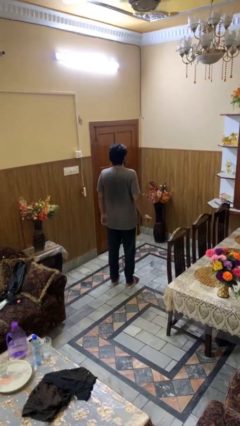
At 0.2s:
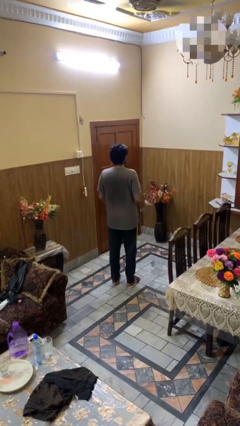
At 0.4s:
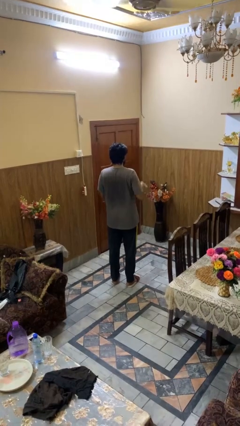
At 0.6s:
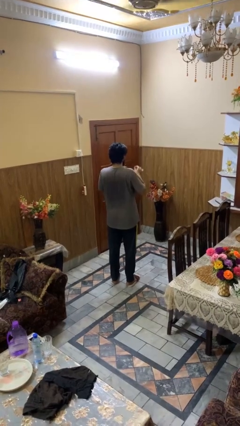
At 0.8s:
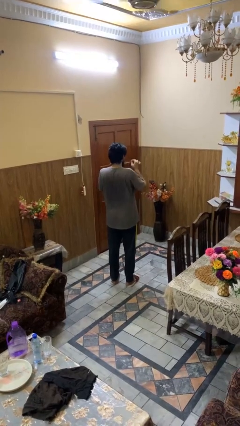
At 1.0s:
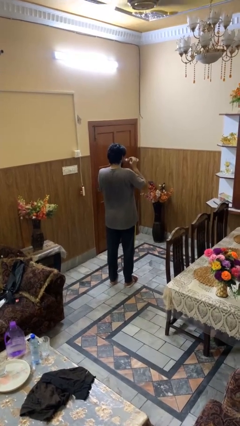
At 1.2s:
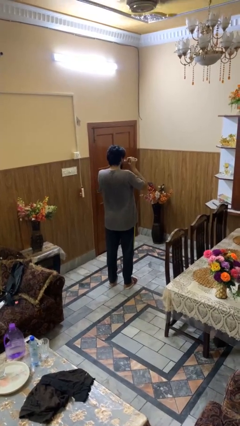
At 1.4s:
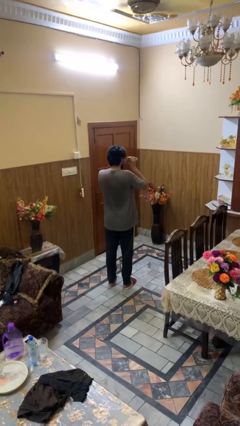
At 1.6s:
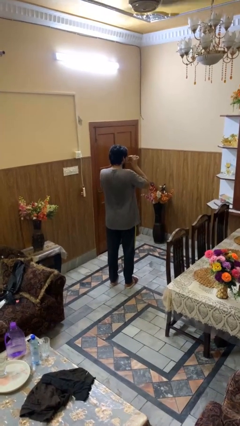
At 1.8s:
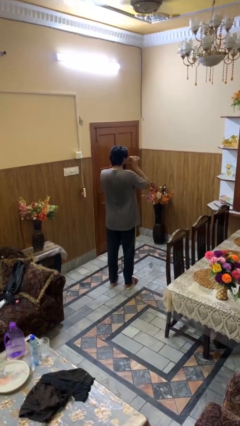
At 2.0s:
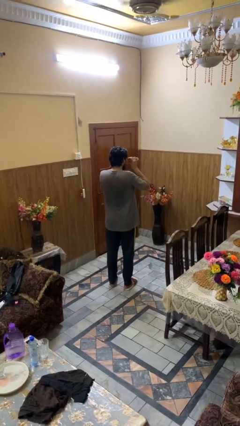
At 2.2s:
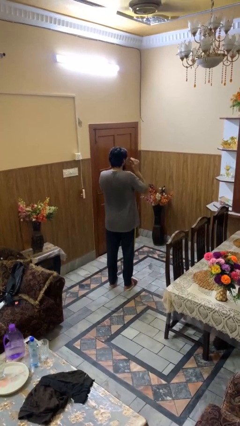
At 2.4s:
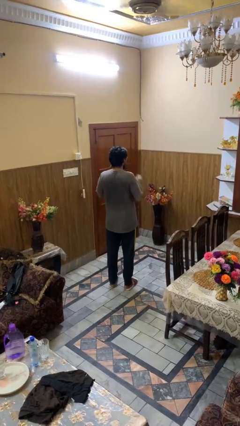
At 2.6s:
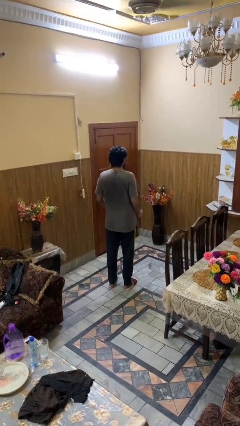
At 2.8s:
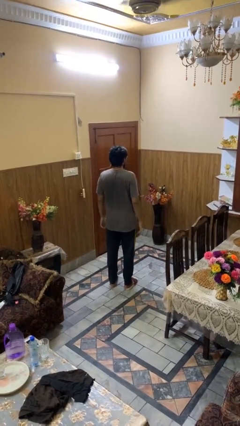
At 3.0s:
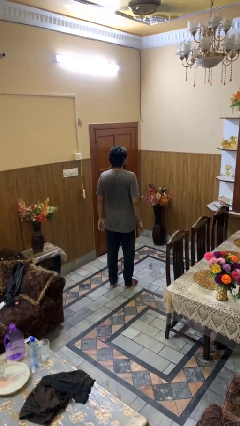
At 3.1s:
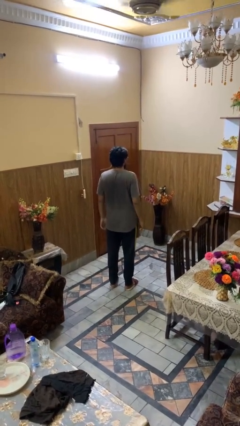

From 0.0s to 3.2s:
person puts on glasses

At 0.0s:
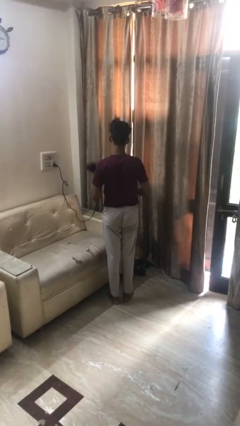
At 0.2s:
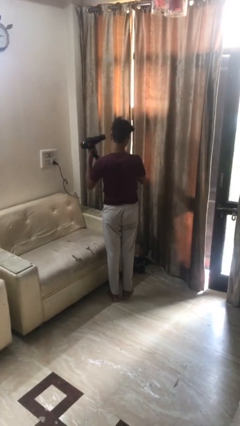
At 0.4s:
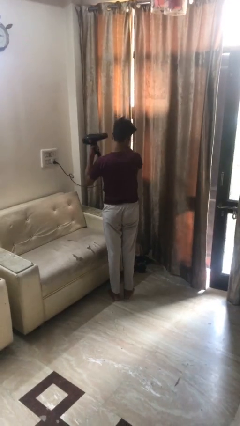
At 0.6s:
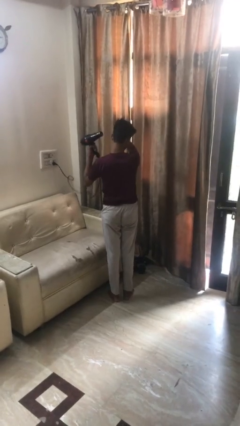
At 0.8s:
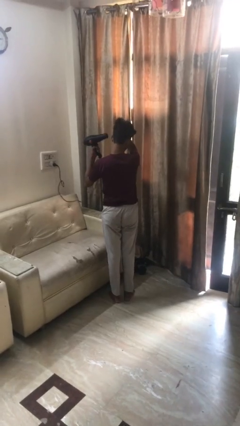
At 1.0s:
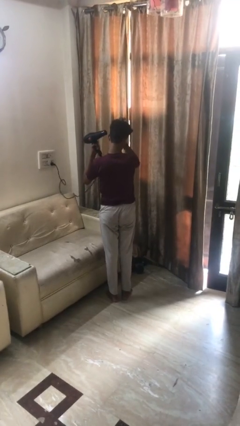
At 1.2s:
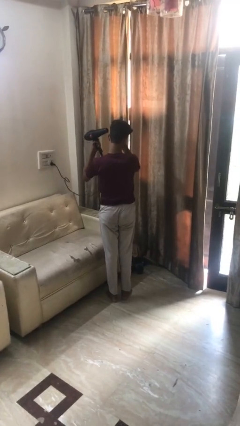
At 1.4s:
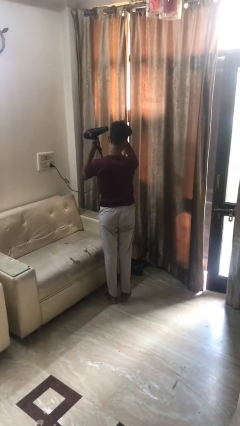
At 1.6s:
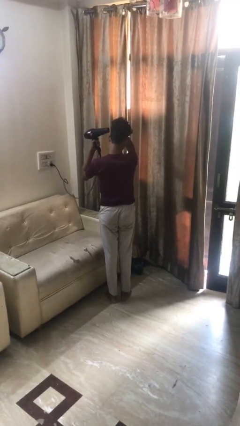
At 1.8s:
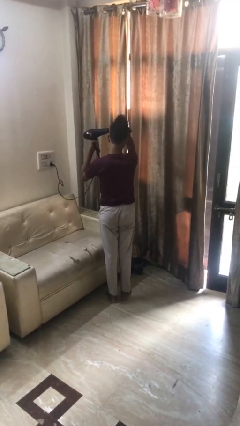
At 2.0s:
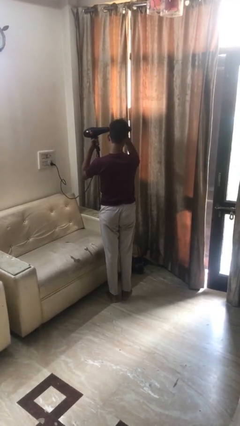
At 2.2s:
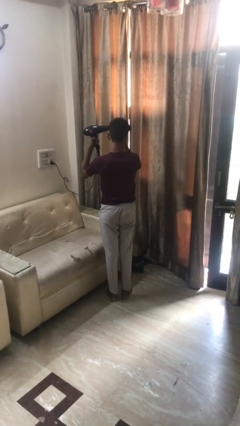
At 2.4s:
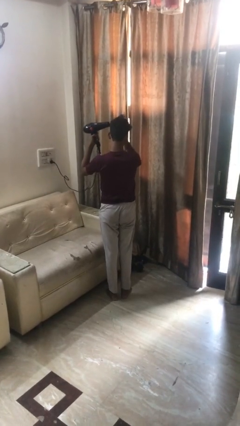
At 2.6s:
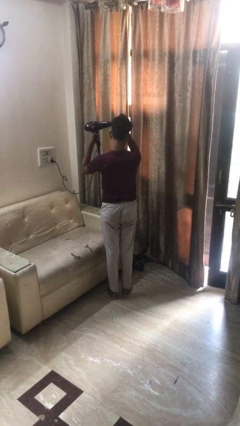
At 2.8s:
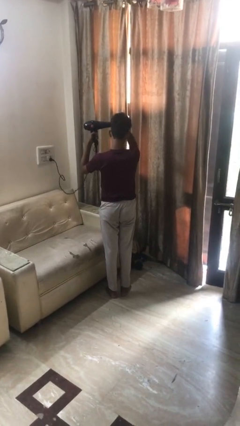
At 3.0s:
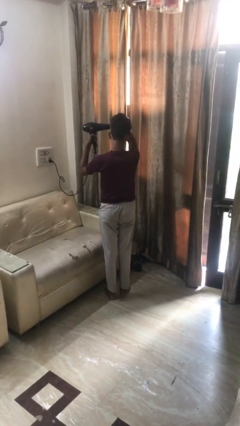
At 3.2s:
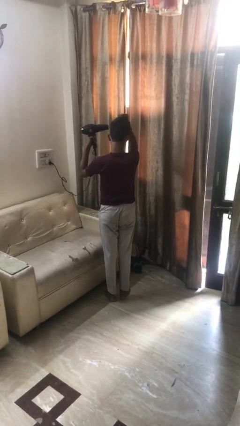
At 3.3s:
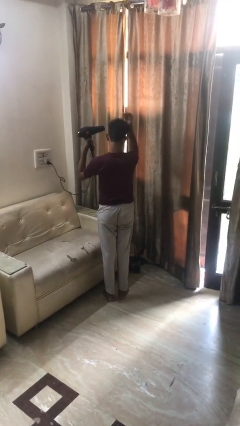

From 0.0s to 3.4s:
person dries hair with hairdryer

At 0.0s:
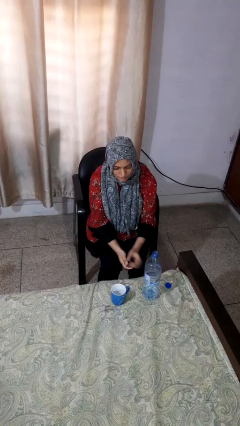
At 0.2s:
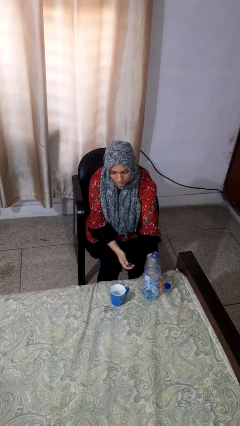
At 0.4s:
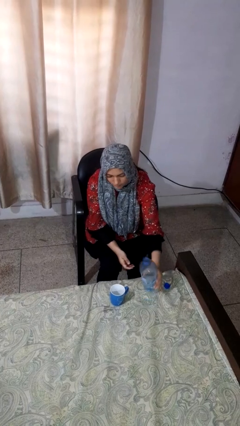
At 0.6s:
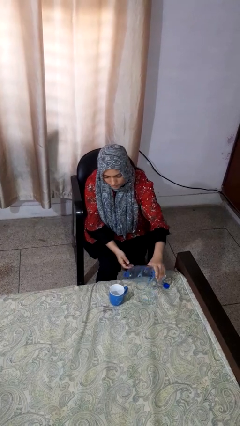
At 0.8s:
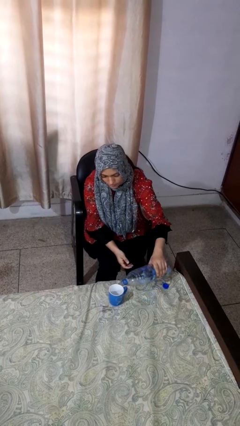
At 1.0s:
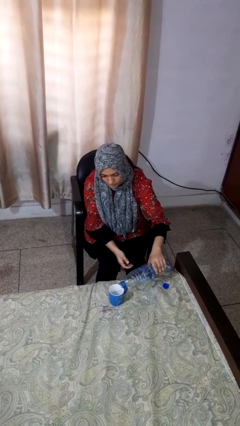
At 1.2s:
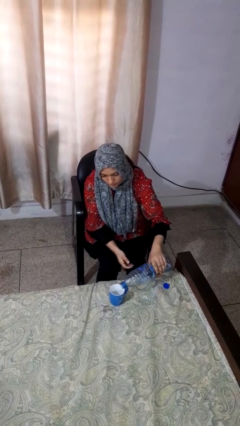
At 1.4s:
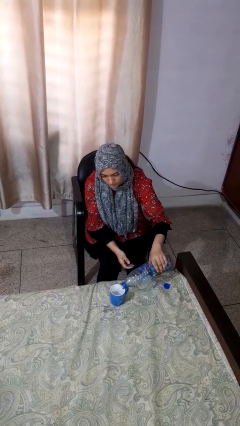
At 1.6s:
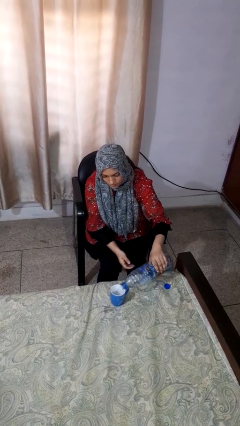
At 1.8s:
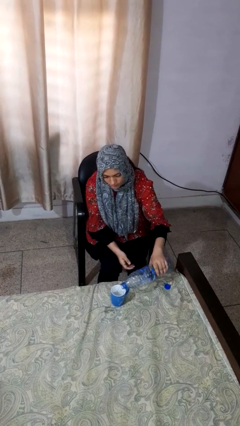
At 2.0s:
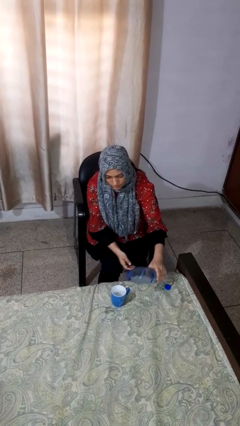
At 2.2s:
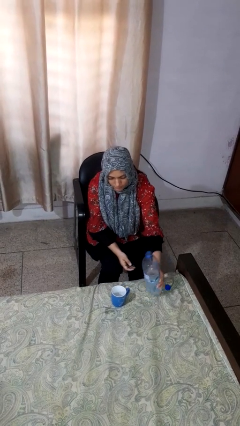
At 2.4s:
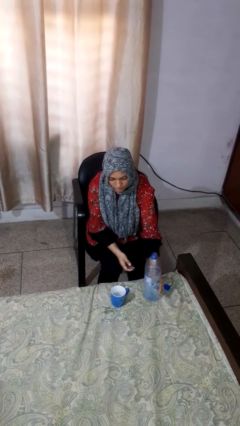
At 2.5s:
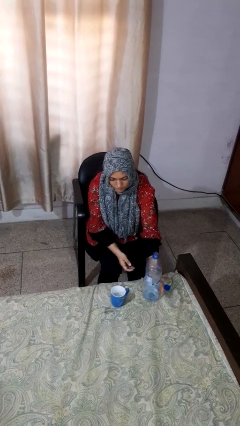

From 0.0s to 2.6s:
person pours liquid into cup

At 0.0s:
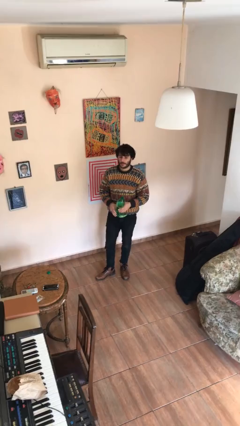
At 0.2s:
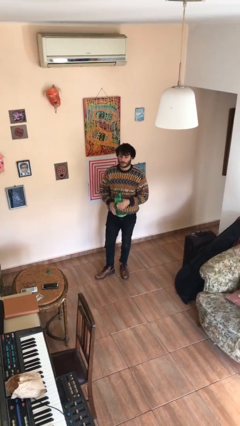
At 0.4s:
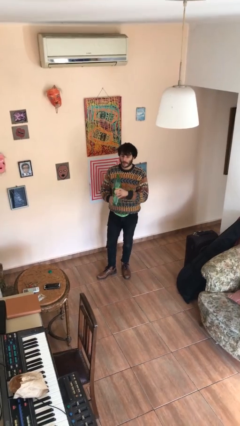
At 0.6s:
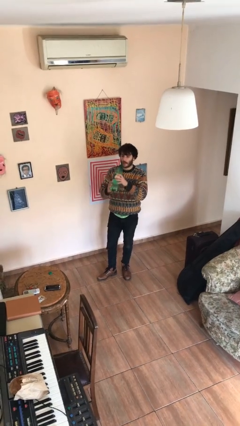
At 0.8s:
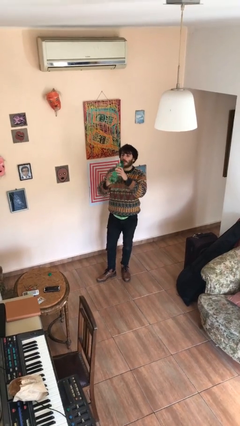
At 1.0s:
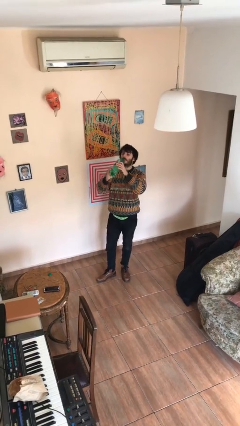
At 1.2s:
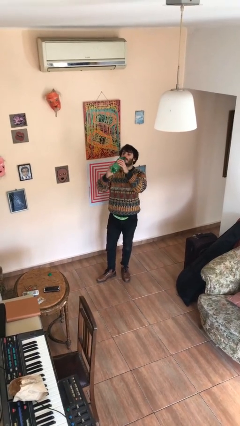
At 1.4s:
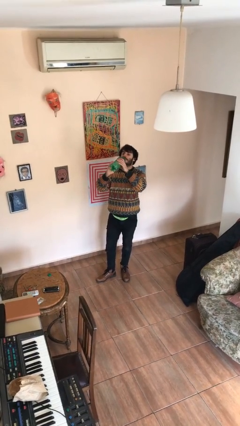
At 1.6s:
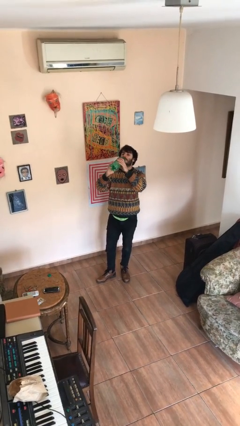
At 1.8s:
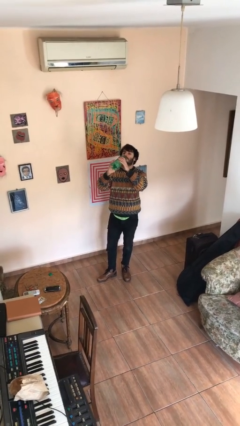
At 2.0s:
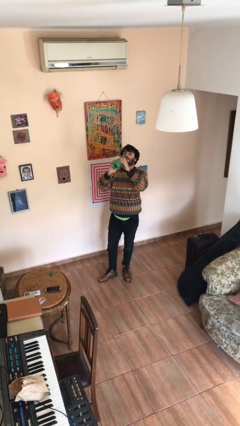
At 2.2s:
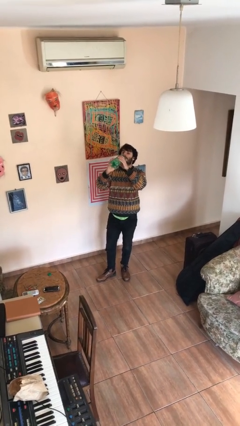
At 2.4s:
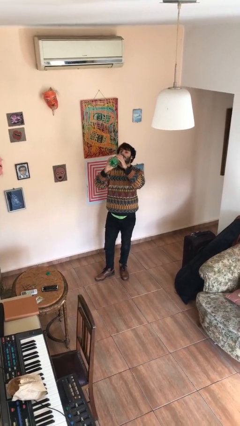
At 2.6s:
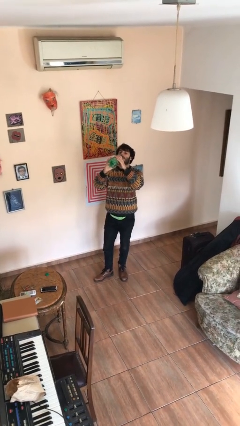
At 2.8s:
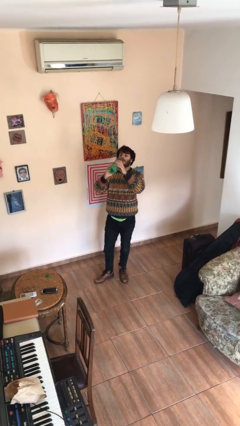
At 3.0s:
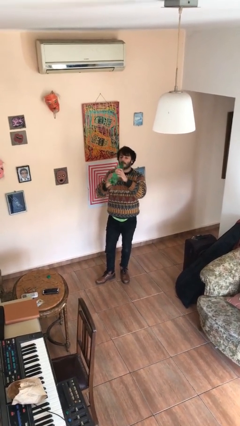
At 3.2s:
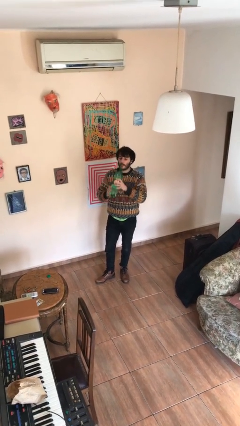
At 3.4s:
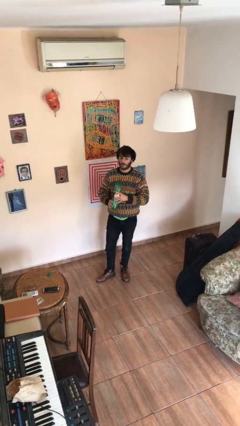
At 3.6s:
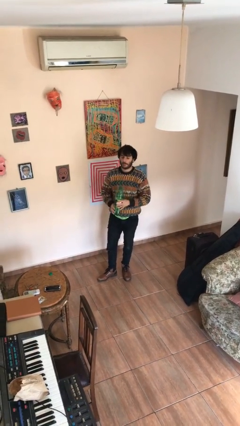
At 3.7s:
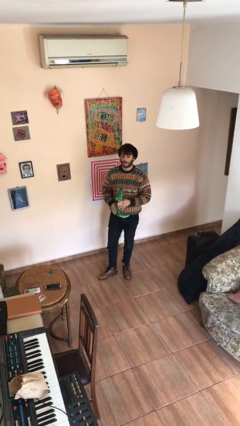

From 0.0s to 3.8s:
person drinks from bottle

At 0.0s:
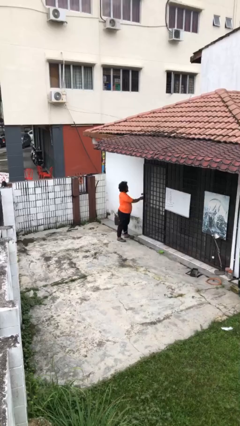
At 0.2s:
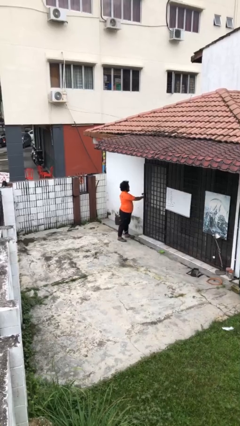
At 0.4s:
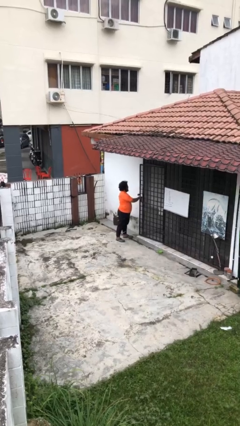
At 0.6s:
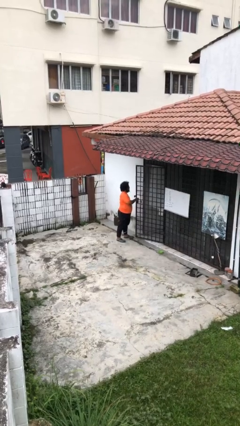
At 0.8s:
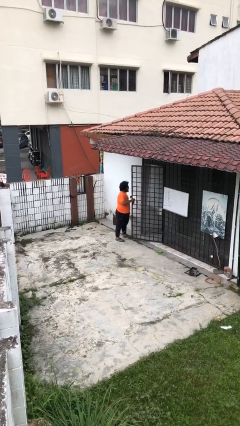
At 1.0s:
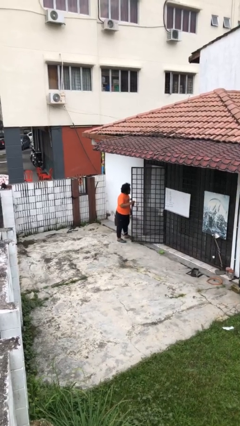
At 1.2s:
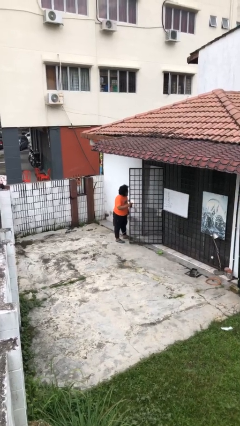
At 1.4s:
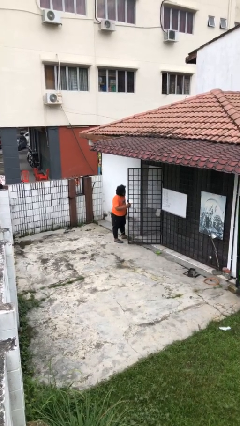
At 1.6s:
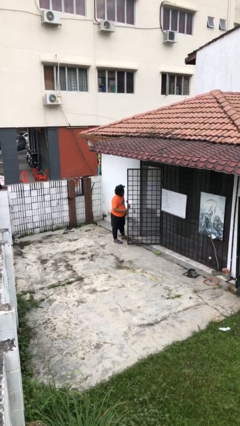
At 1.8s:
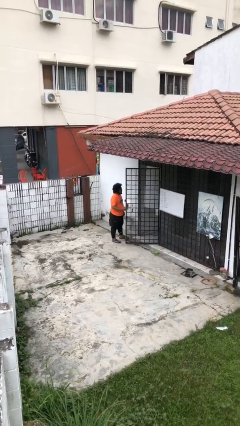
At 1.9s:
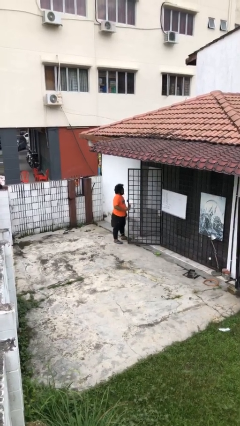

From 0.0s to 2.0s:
person opens facility door

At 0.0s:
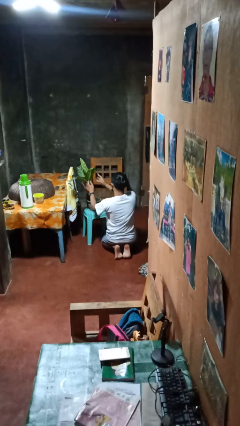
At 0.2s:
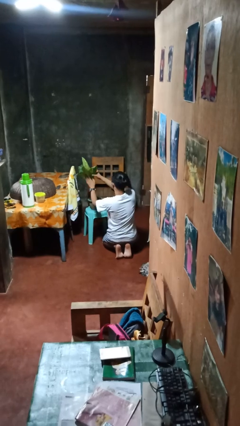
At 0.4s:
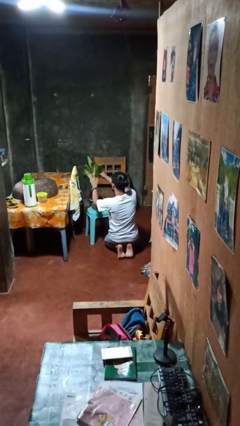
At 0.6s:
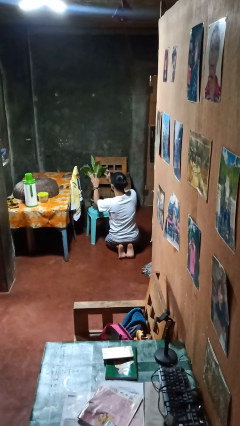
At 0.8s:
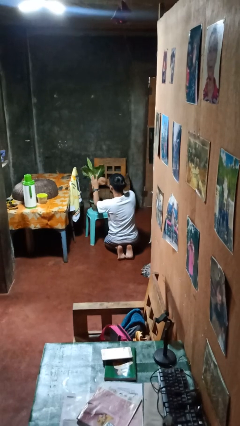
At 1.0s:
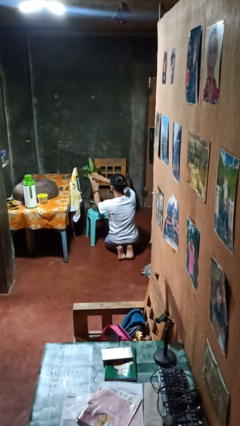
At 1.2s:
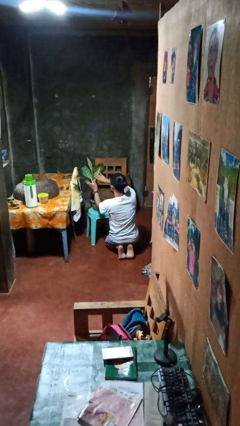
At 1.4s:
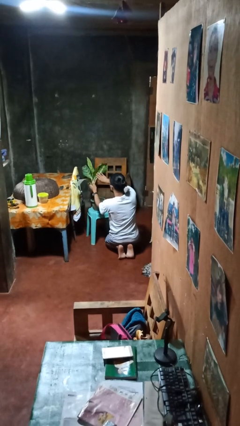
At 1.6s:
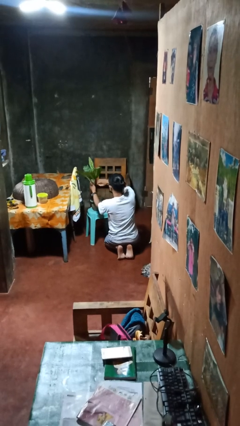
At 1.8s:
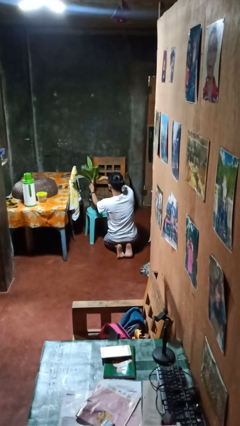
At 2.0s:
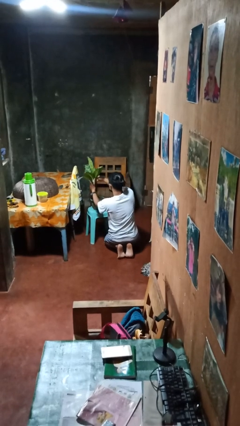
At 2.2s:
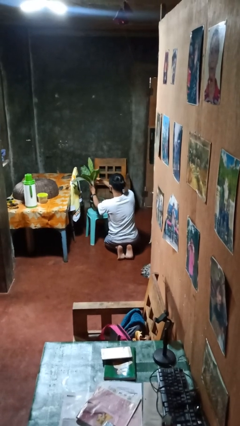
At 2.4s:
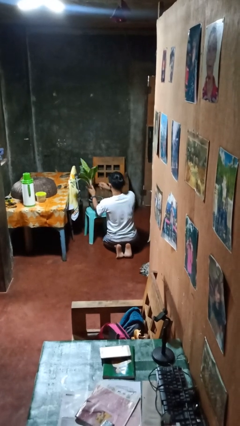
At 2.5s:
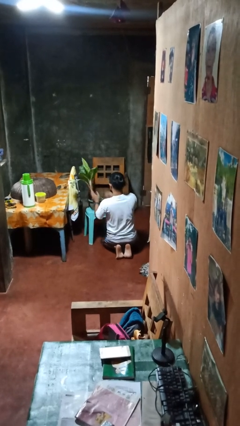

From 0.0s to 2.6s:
person arranges flowers in vase
